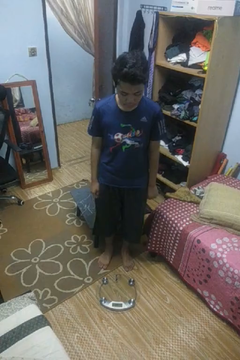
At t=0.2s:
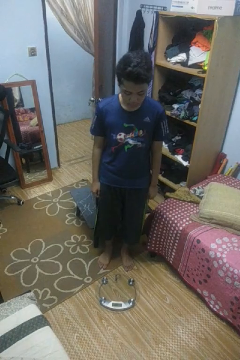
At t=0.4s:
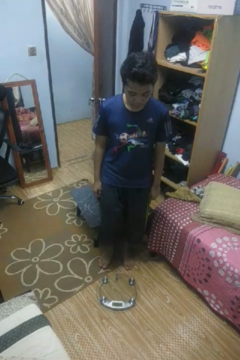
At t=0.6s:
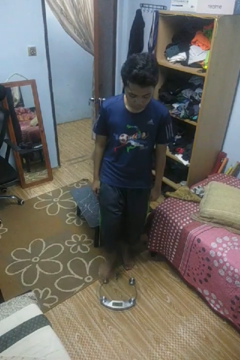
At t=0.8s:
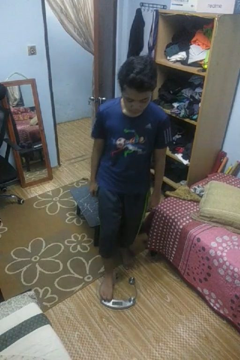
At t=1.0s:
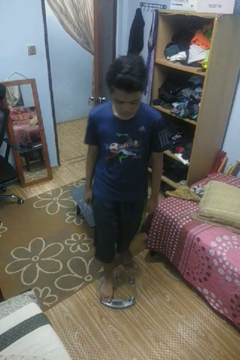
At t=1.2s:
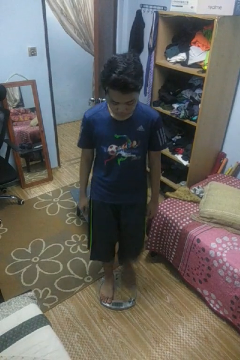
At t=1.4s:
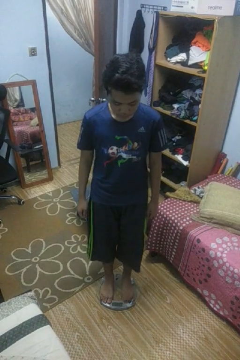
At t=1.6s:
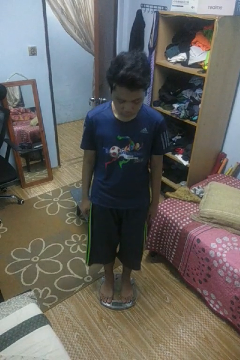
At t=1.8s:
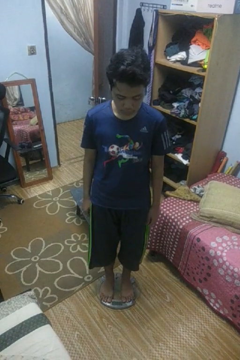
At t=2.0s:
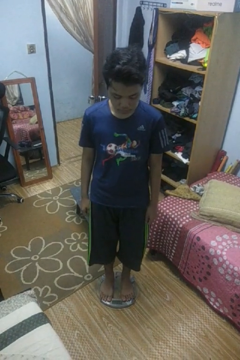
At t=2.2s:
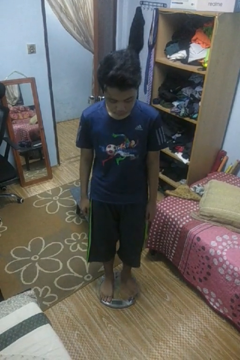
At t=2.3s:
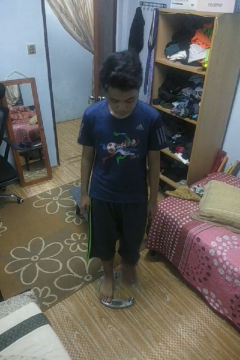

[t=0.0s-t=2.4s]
person uses bodyweight scale

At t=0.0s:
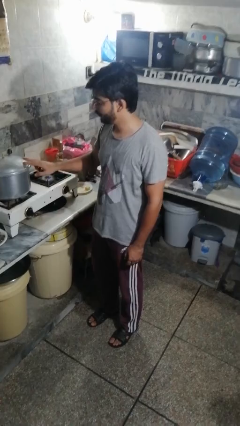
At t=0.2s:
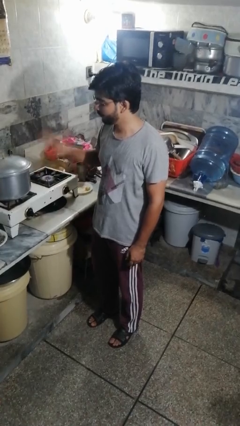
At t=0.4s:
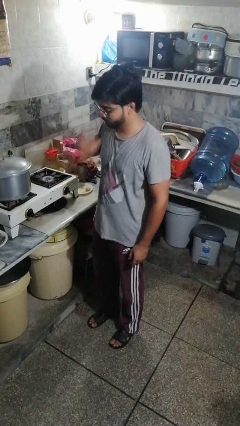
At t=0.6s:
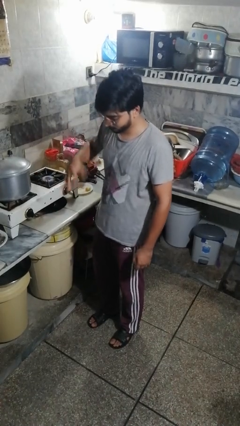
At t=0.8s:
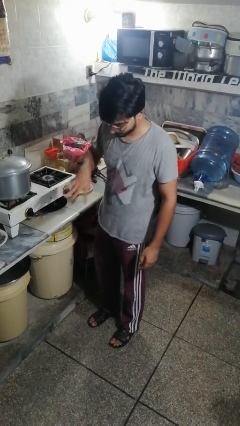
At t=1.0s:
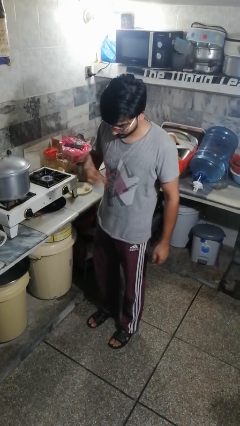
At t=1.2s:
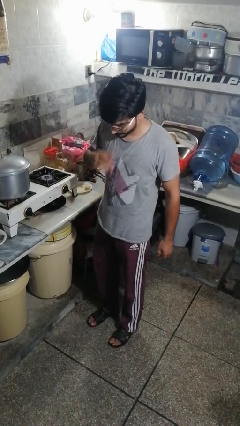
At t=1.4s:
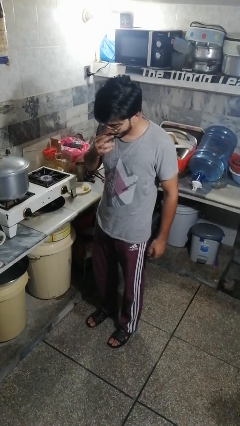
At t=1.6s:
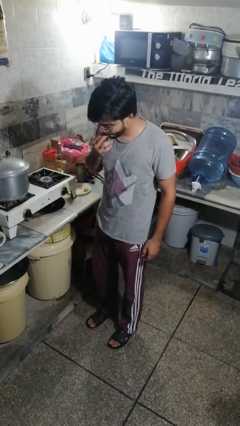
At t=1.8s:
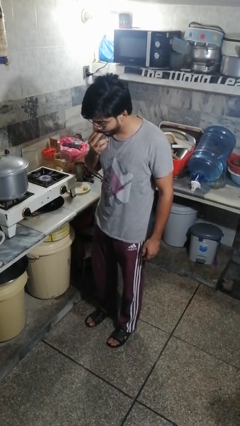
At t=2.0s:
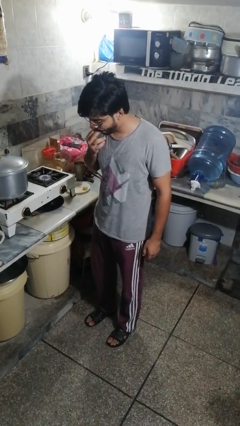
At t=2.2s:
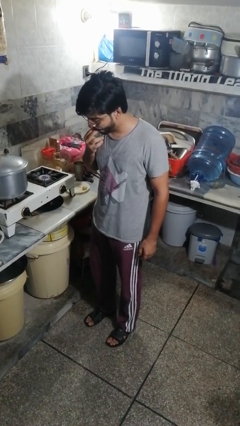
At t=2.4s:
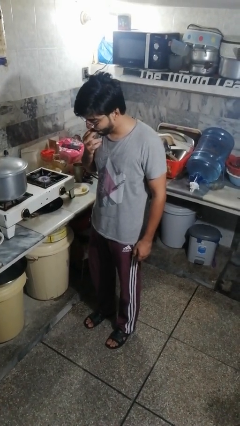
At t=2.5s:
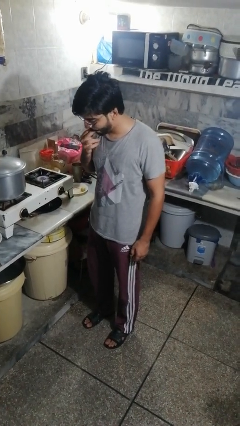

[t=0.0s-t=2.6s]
person burns hand

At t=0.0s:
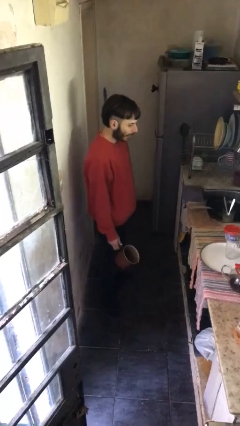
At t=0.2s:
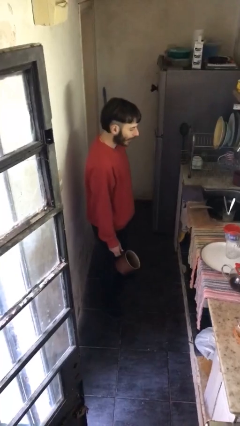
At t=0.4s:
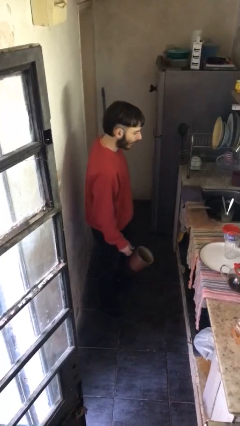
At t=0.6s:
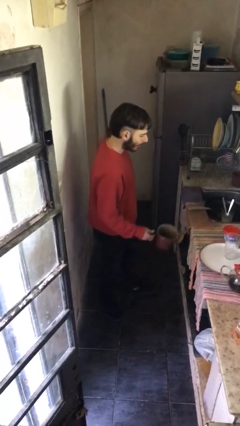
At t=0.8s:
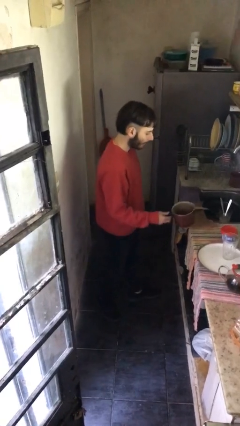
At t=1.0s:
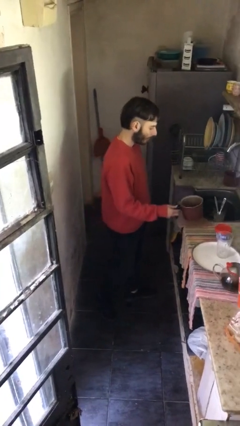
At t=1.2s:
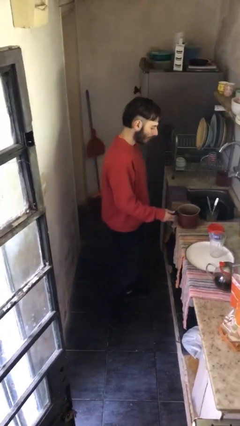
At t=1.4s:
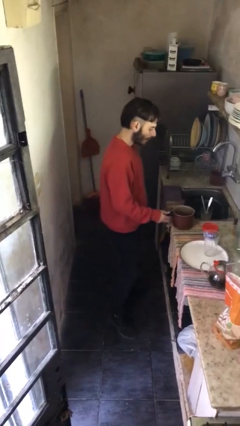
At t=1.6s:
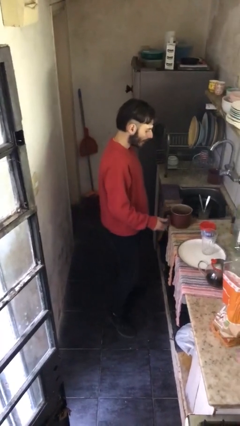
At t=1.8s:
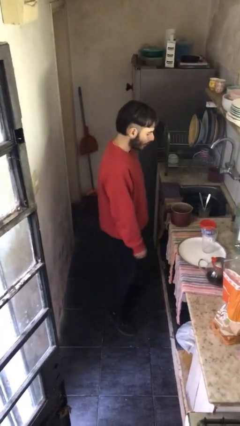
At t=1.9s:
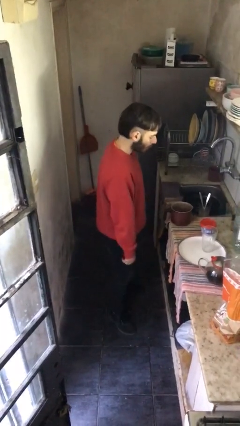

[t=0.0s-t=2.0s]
person puts down object on countertop

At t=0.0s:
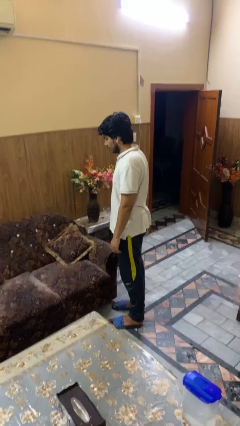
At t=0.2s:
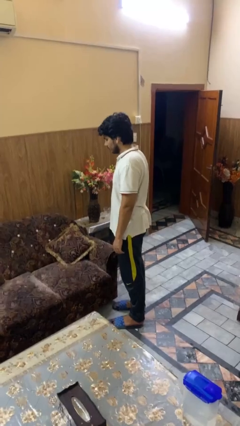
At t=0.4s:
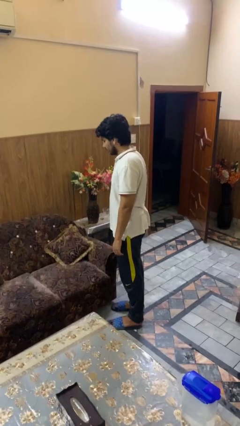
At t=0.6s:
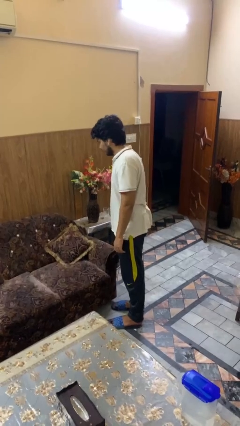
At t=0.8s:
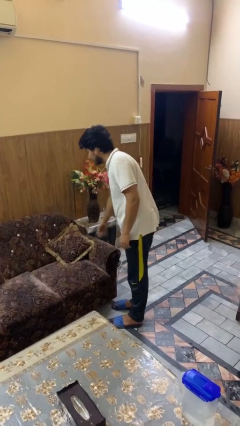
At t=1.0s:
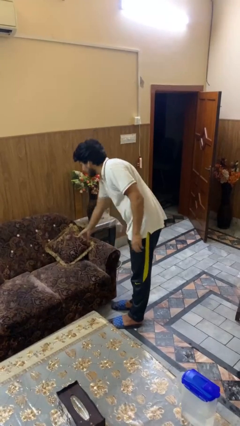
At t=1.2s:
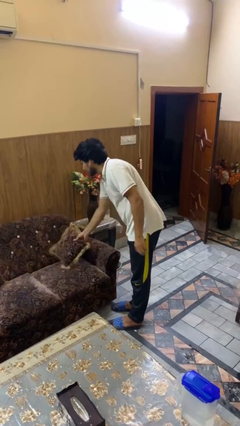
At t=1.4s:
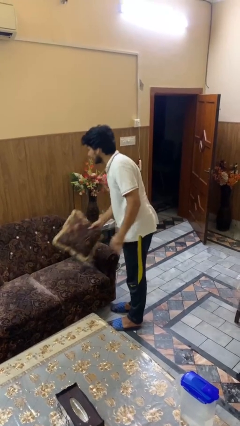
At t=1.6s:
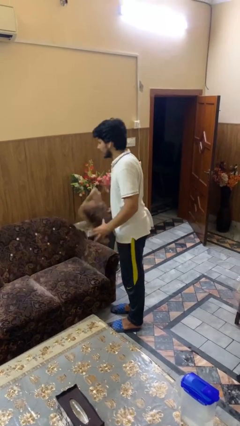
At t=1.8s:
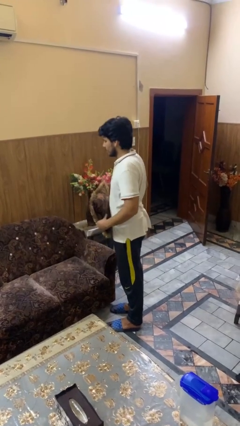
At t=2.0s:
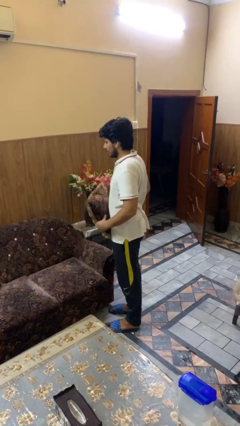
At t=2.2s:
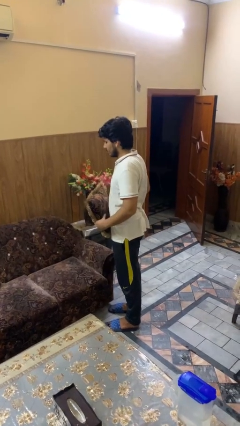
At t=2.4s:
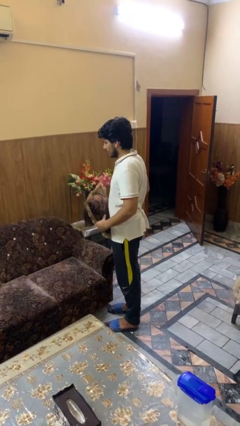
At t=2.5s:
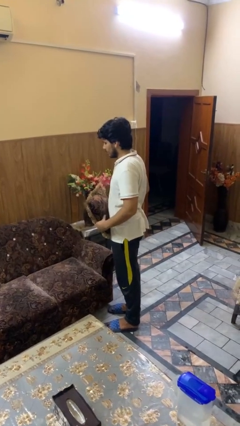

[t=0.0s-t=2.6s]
person picks up object from couch

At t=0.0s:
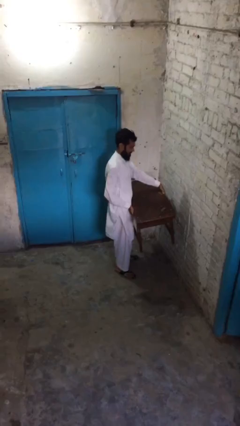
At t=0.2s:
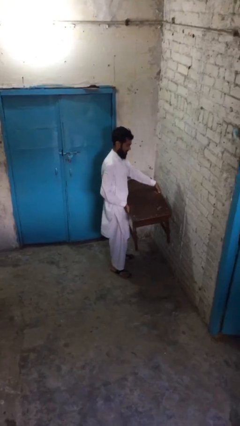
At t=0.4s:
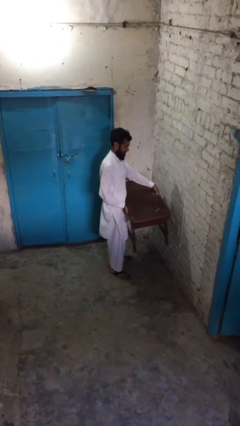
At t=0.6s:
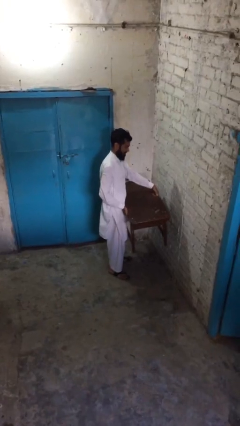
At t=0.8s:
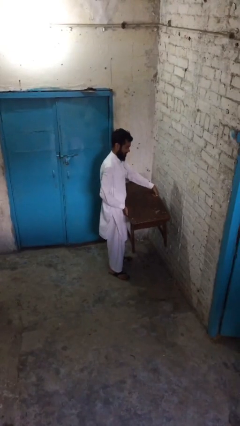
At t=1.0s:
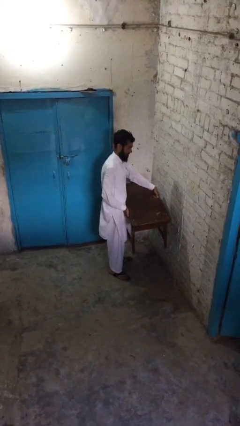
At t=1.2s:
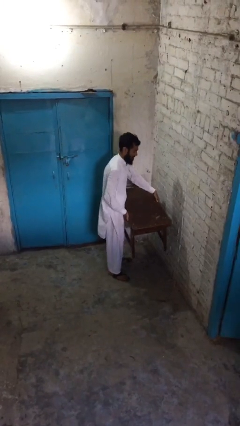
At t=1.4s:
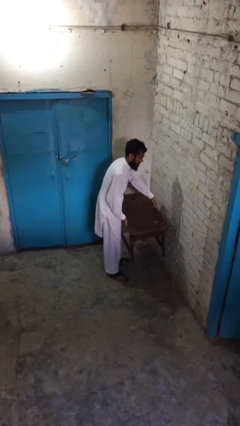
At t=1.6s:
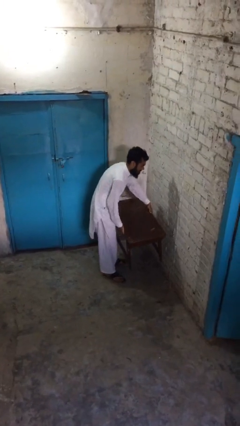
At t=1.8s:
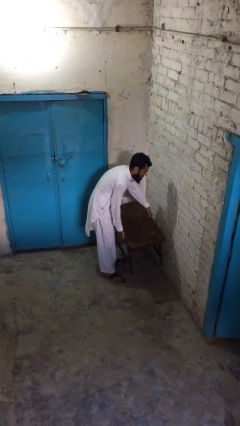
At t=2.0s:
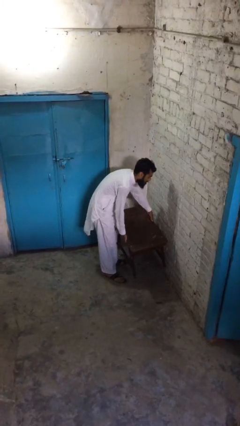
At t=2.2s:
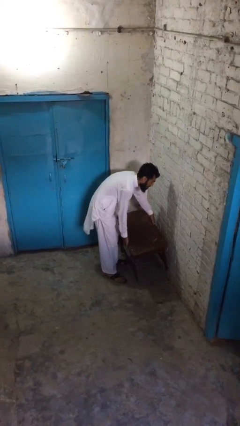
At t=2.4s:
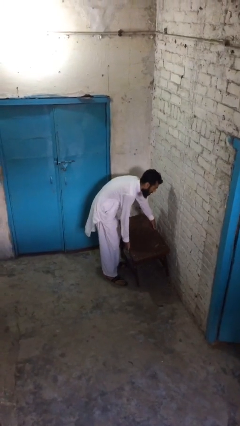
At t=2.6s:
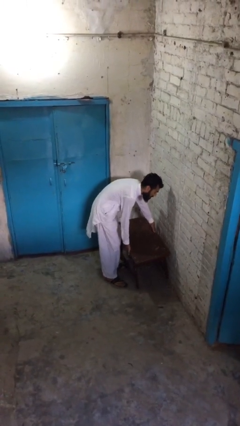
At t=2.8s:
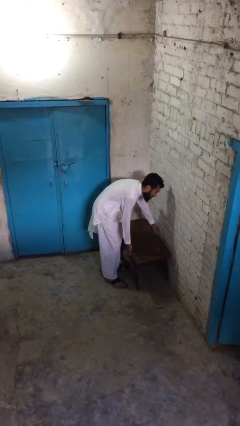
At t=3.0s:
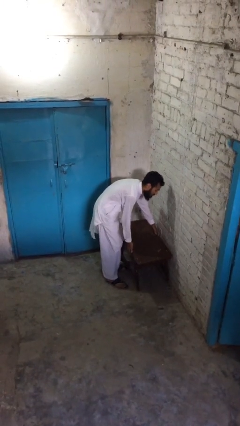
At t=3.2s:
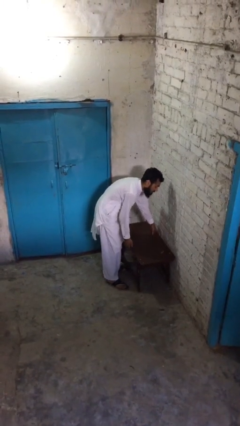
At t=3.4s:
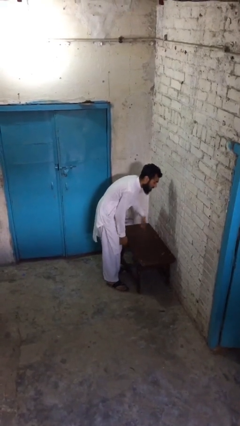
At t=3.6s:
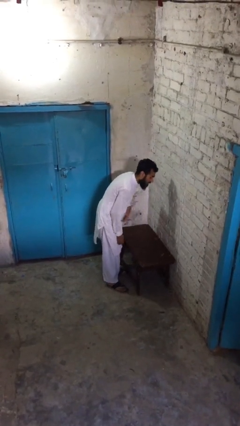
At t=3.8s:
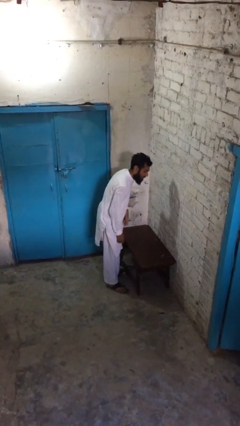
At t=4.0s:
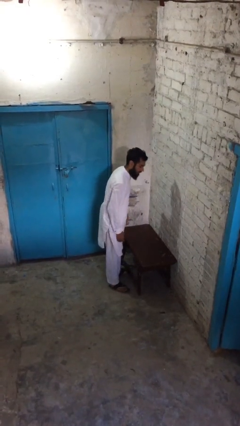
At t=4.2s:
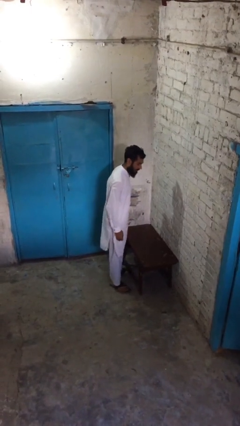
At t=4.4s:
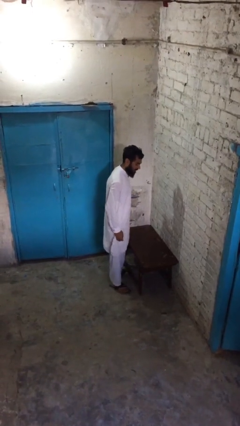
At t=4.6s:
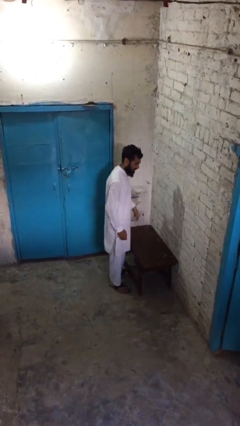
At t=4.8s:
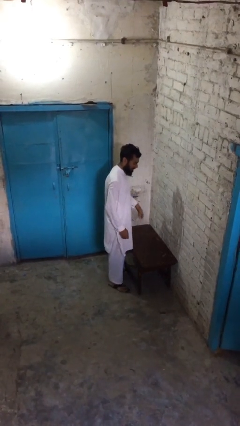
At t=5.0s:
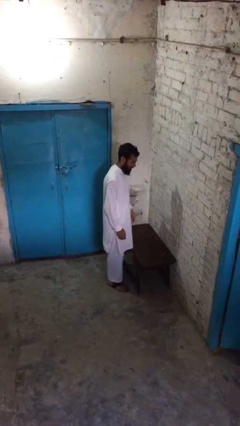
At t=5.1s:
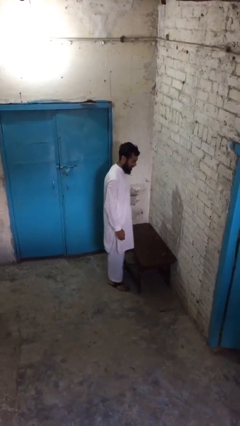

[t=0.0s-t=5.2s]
person puts down object on floor

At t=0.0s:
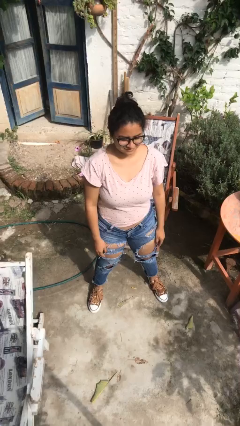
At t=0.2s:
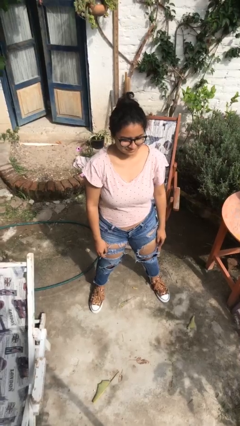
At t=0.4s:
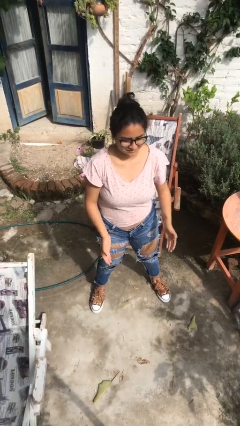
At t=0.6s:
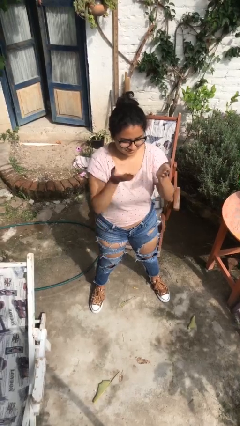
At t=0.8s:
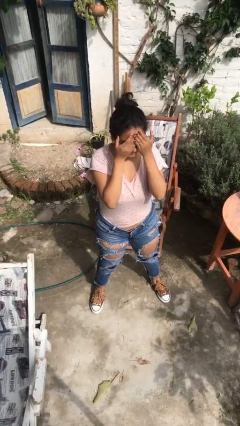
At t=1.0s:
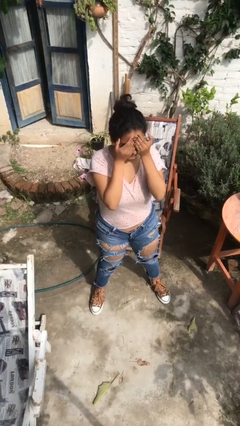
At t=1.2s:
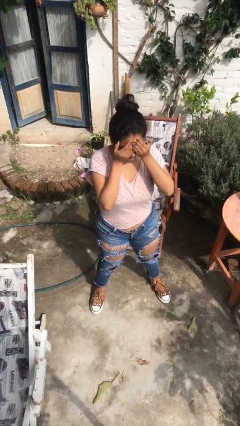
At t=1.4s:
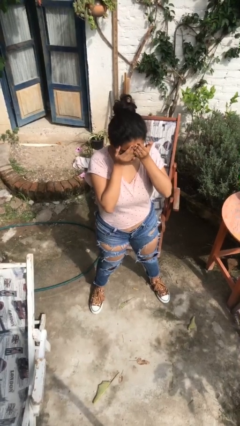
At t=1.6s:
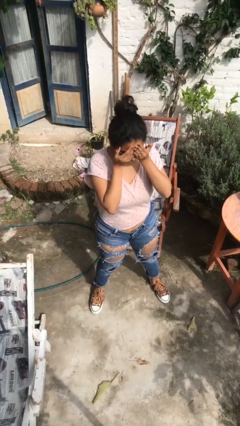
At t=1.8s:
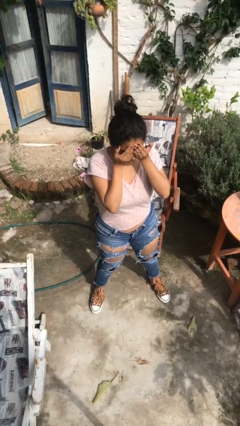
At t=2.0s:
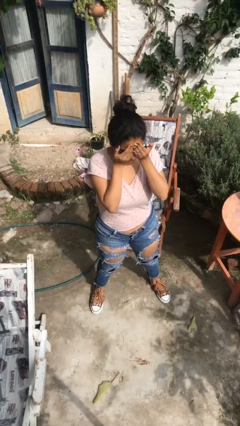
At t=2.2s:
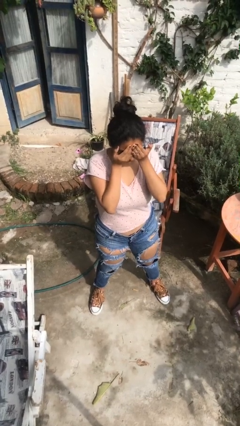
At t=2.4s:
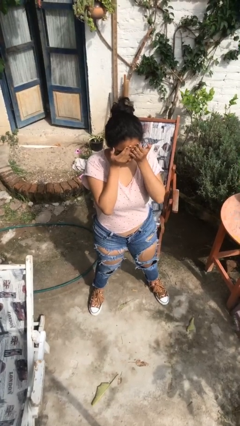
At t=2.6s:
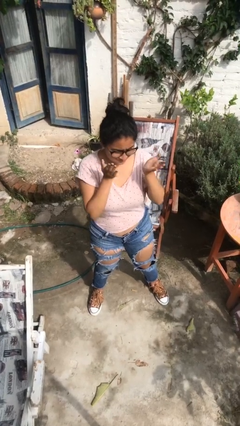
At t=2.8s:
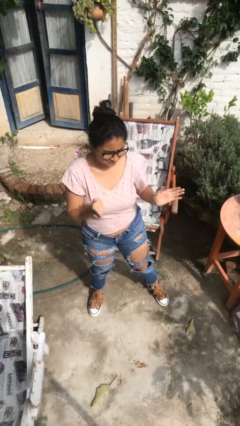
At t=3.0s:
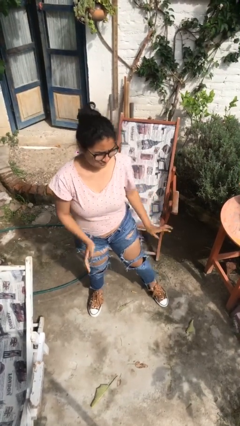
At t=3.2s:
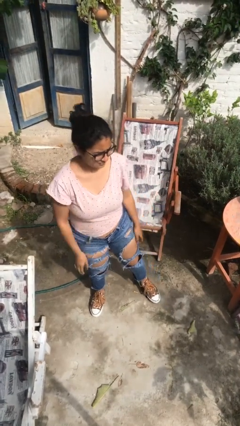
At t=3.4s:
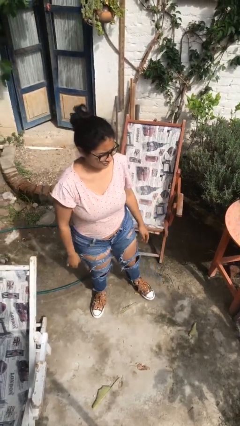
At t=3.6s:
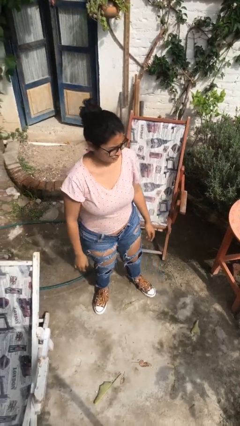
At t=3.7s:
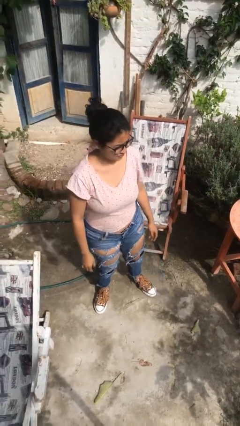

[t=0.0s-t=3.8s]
person covers face with hands
